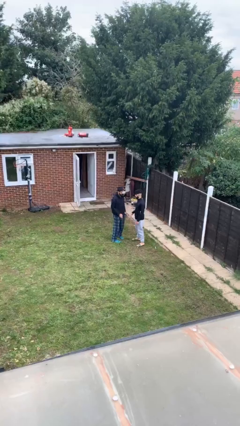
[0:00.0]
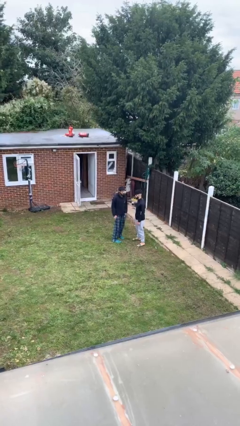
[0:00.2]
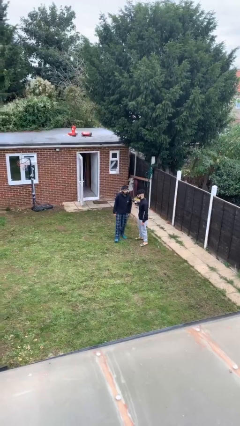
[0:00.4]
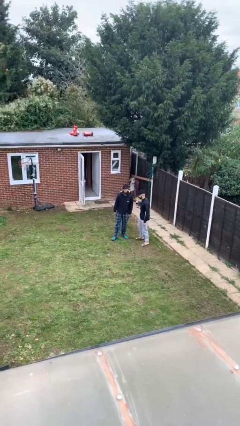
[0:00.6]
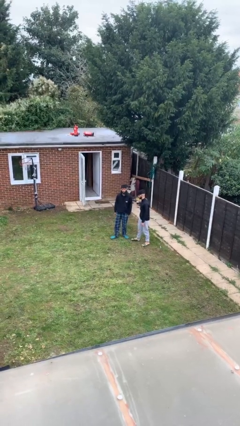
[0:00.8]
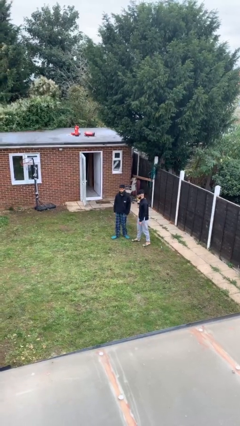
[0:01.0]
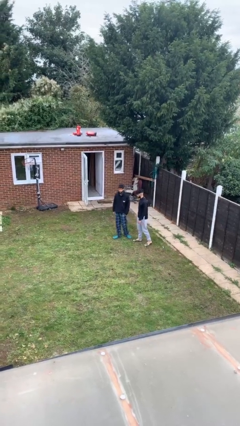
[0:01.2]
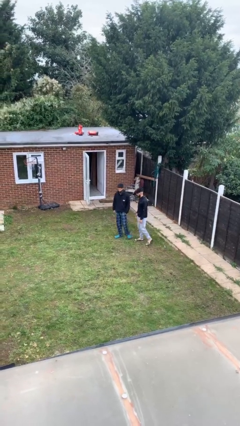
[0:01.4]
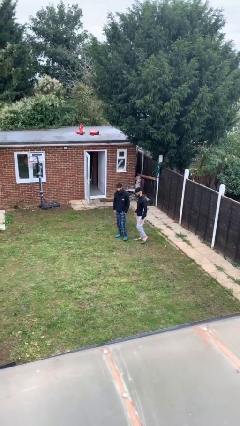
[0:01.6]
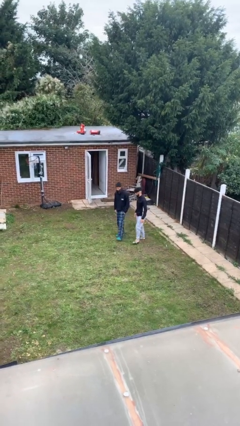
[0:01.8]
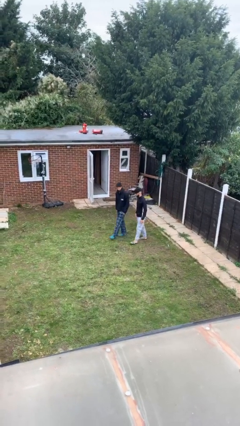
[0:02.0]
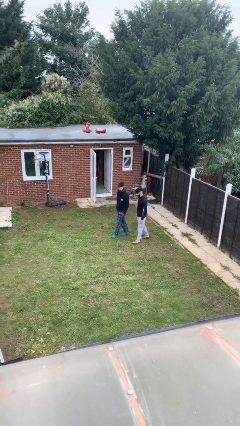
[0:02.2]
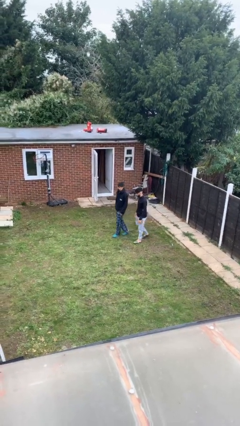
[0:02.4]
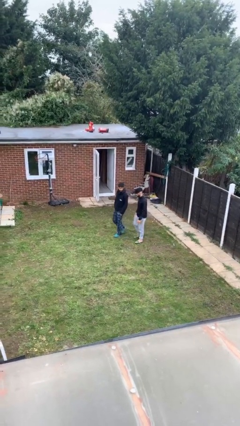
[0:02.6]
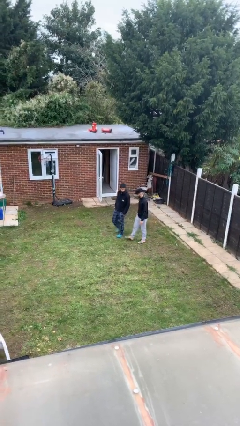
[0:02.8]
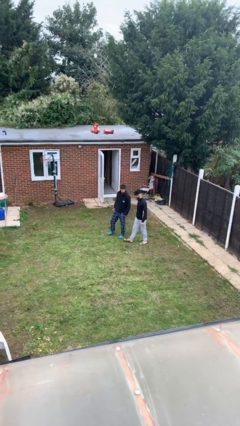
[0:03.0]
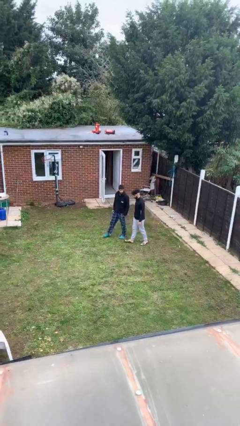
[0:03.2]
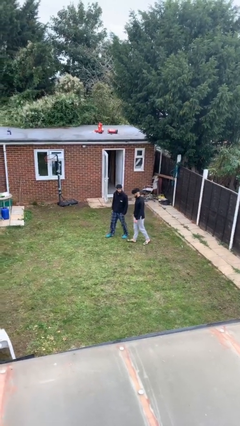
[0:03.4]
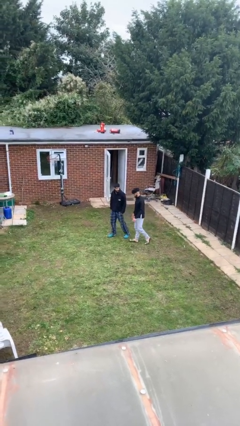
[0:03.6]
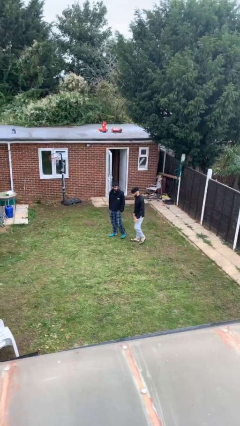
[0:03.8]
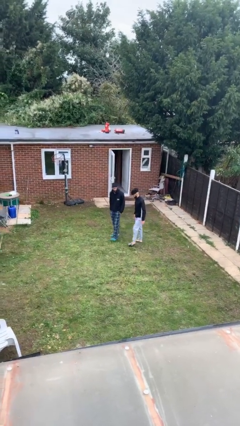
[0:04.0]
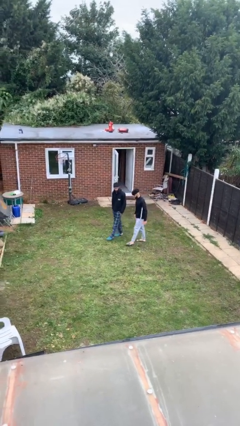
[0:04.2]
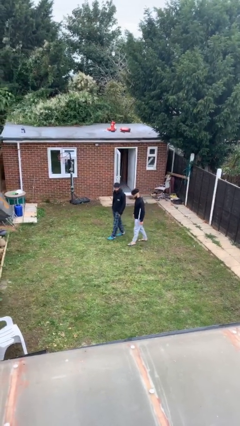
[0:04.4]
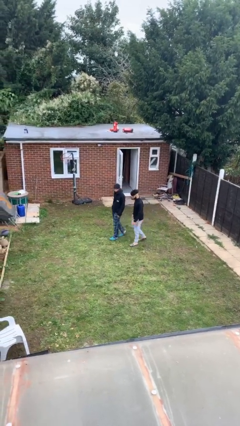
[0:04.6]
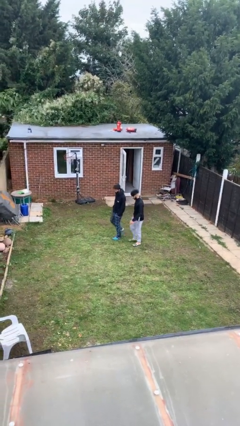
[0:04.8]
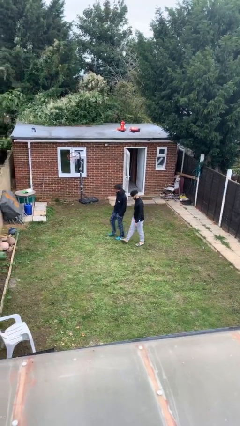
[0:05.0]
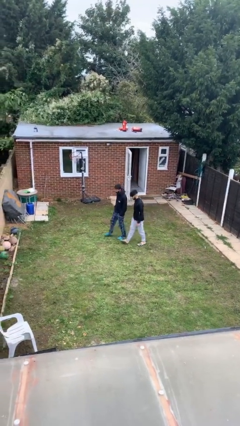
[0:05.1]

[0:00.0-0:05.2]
person talks to person

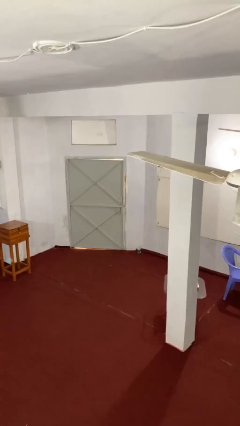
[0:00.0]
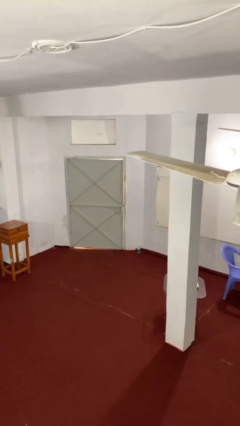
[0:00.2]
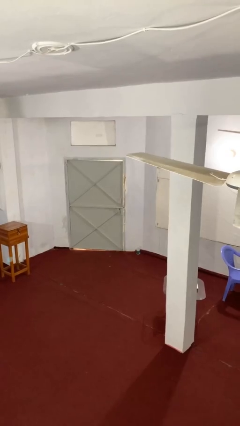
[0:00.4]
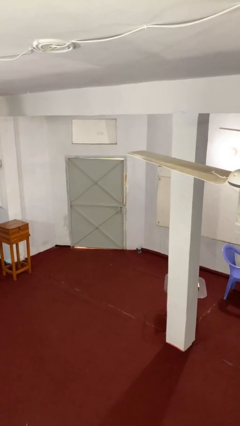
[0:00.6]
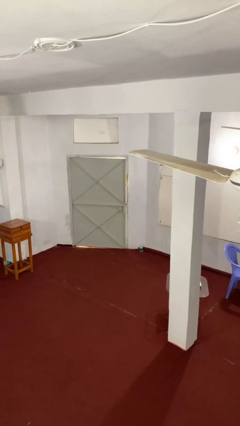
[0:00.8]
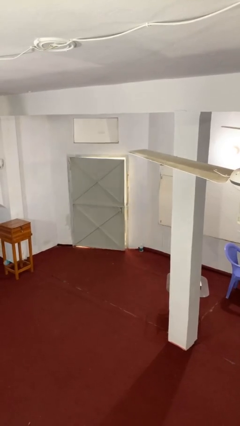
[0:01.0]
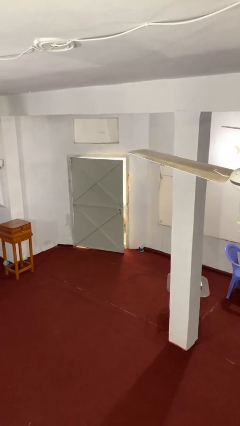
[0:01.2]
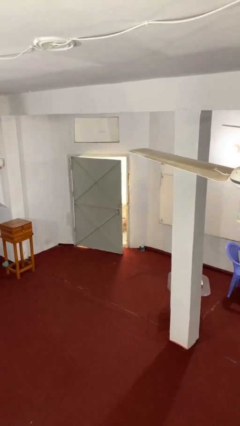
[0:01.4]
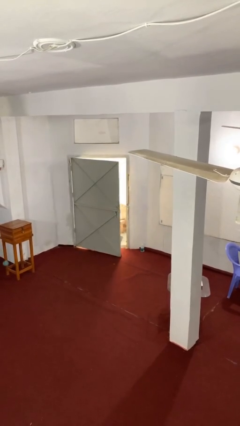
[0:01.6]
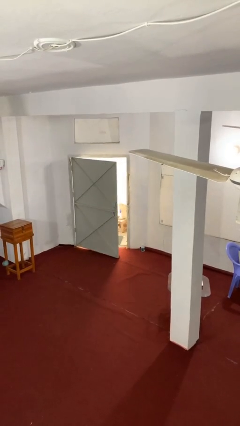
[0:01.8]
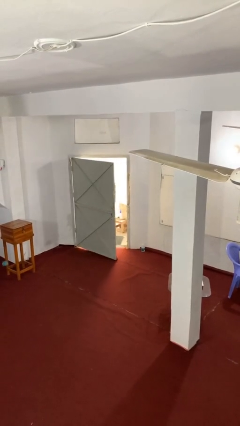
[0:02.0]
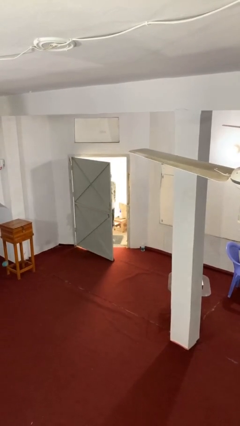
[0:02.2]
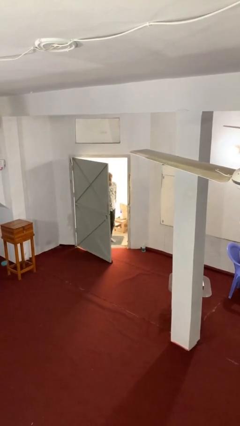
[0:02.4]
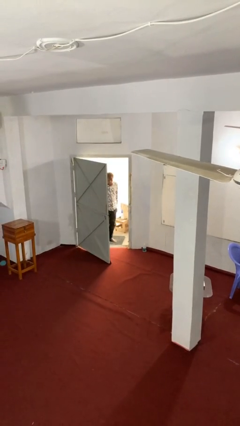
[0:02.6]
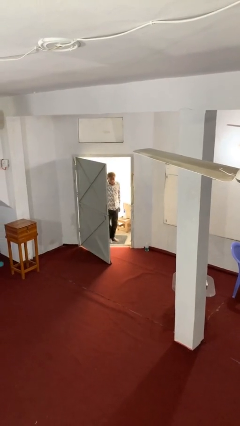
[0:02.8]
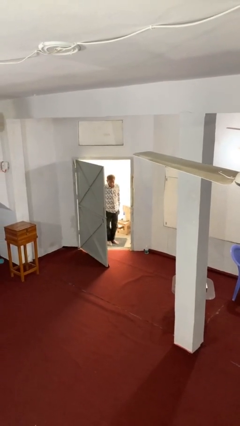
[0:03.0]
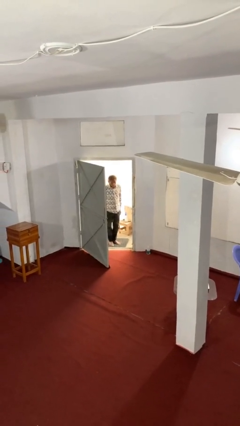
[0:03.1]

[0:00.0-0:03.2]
person opens facility door

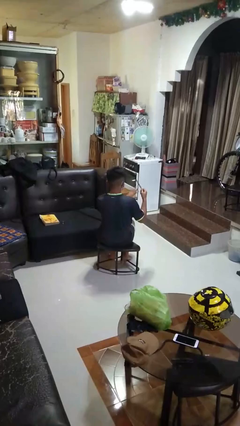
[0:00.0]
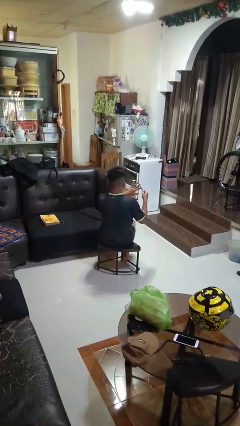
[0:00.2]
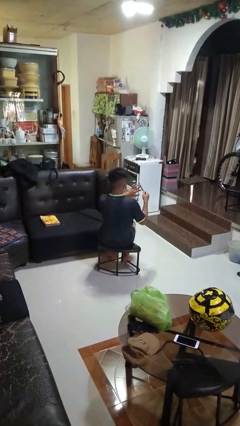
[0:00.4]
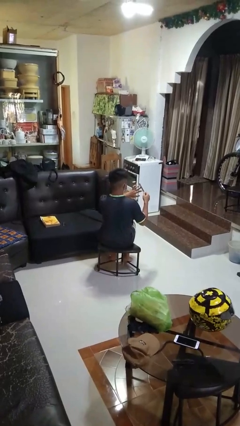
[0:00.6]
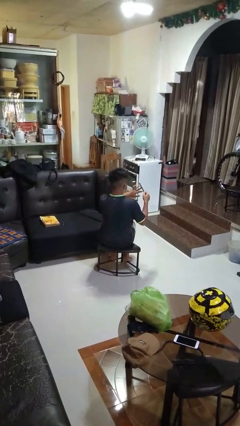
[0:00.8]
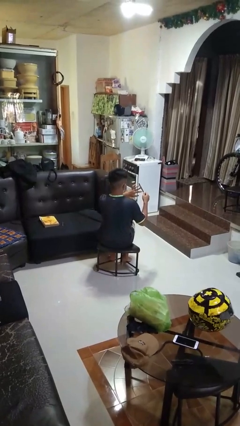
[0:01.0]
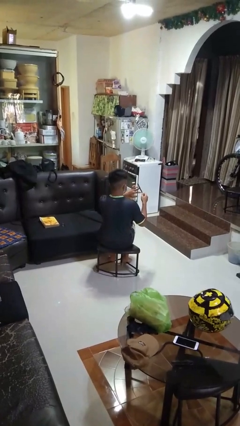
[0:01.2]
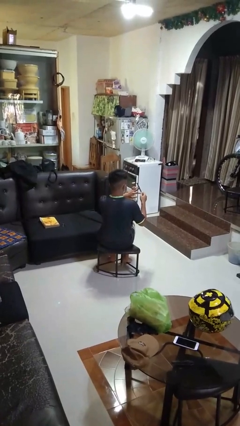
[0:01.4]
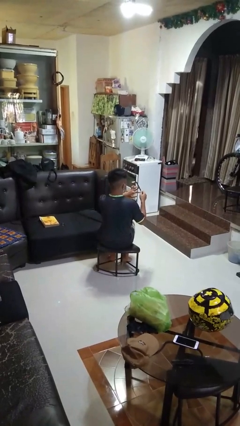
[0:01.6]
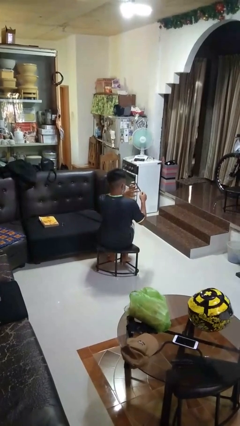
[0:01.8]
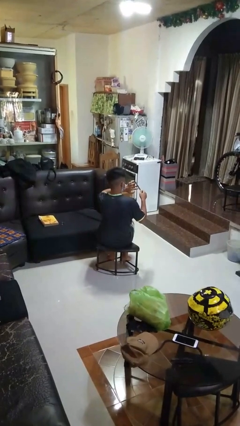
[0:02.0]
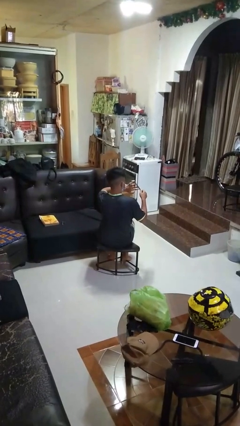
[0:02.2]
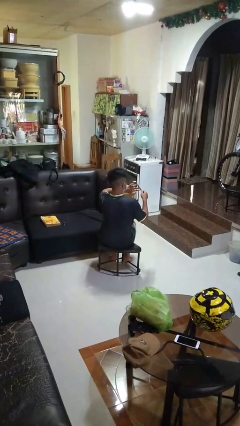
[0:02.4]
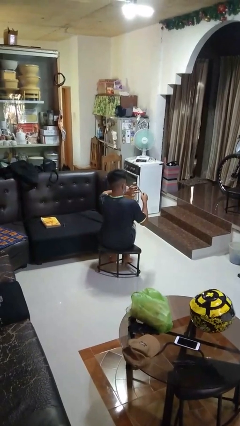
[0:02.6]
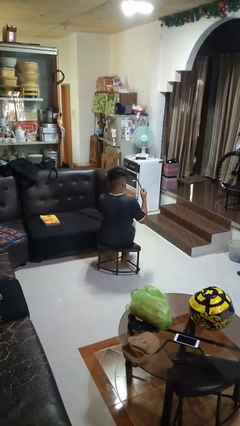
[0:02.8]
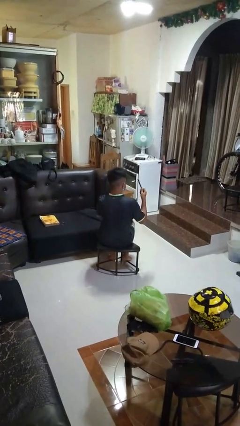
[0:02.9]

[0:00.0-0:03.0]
person files fingernails

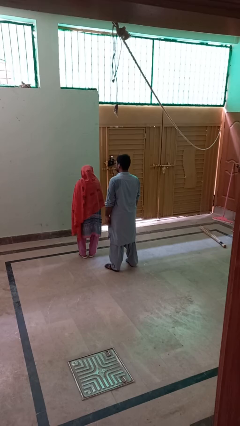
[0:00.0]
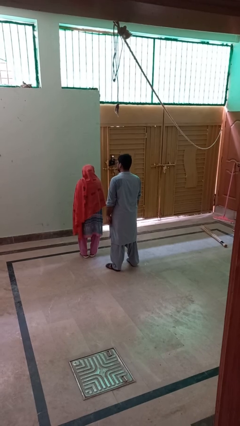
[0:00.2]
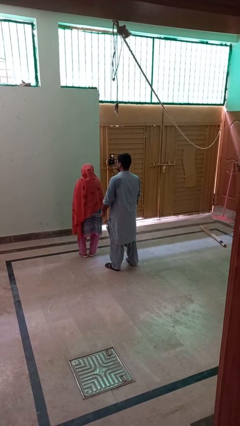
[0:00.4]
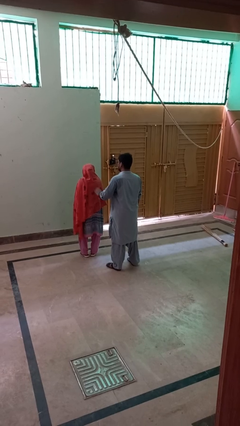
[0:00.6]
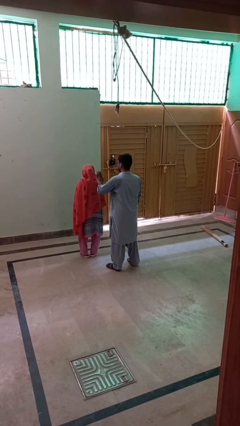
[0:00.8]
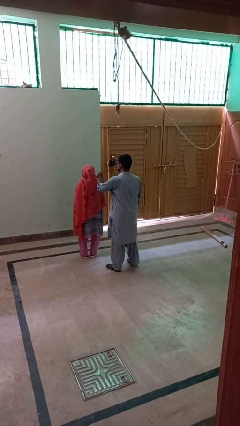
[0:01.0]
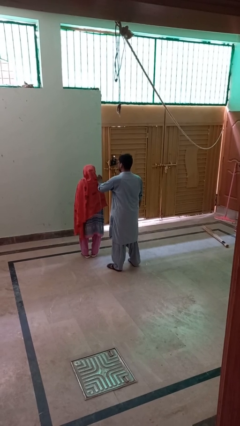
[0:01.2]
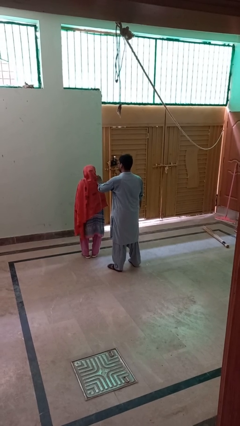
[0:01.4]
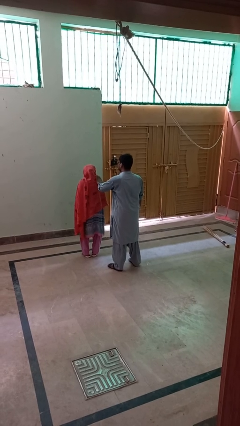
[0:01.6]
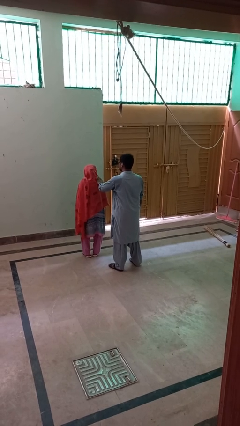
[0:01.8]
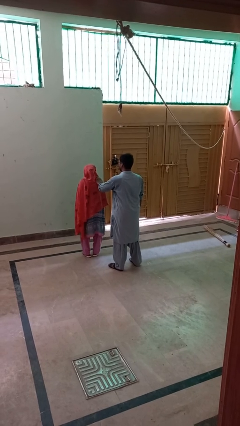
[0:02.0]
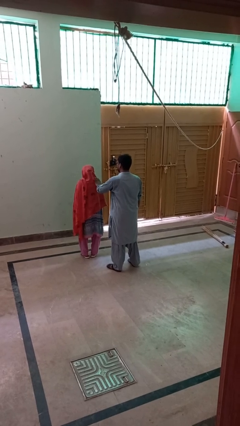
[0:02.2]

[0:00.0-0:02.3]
person touches back of person

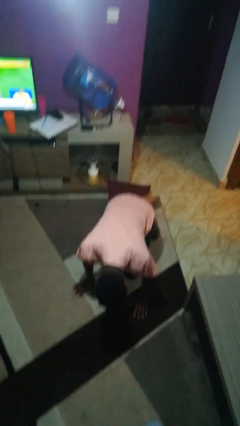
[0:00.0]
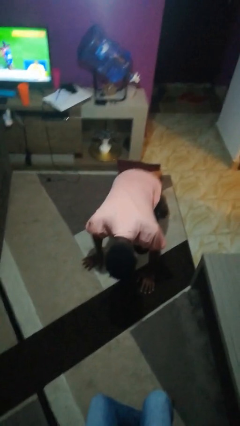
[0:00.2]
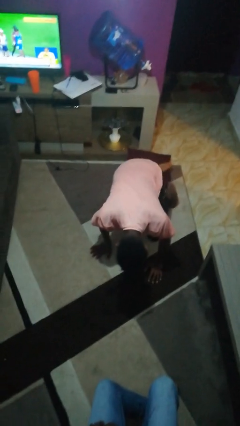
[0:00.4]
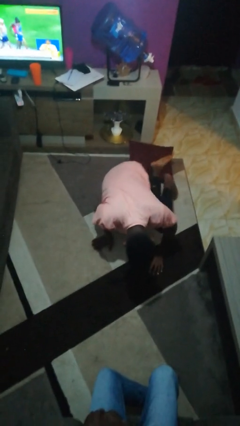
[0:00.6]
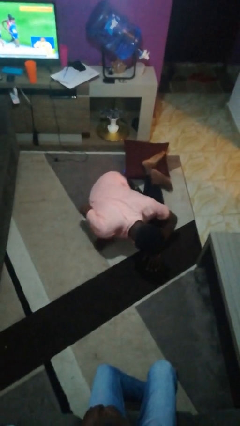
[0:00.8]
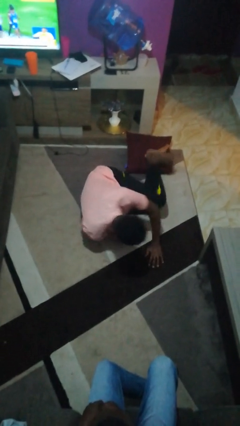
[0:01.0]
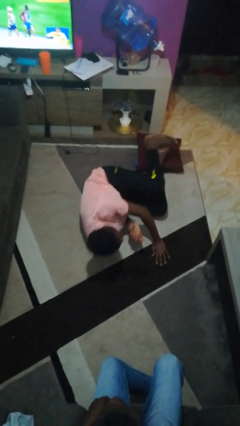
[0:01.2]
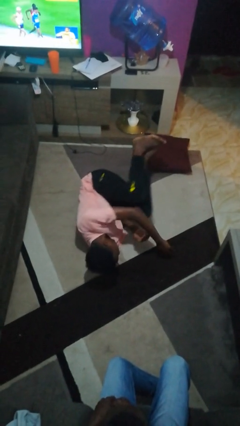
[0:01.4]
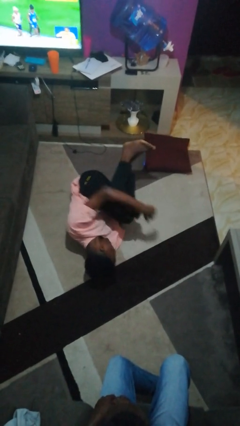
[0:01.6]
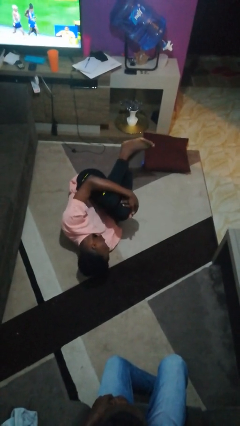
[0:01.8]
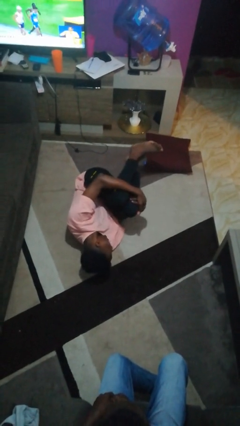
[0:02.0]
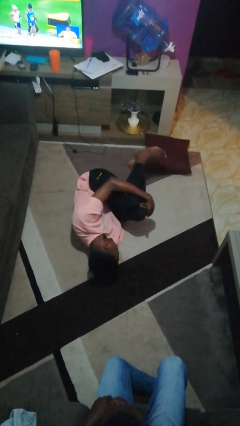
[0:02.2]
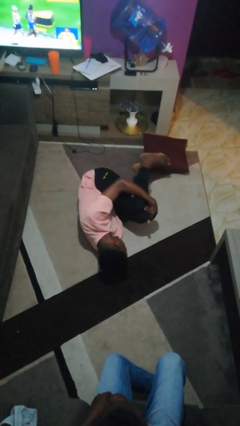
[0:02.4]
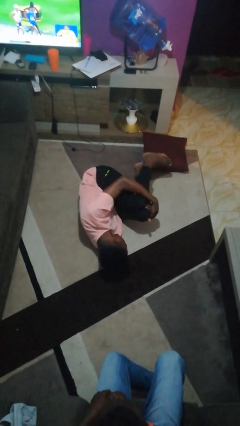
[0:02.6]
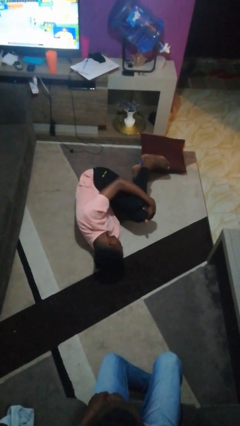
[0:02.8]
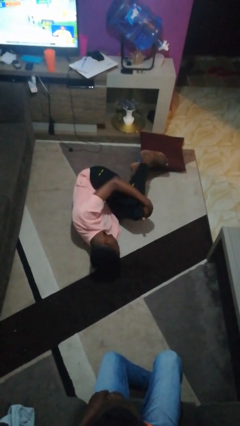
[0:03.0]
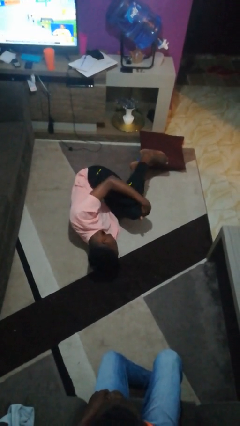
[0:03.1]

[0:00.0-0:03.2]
person lies down on floor

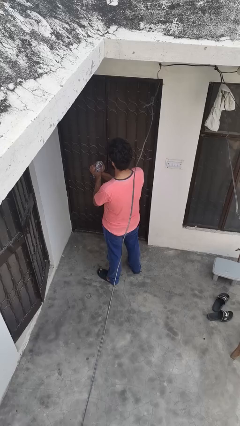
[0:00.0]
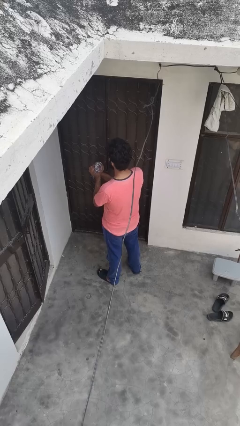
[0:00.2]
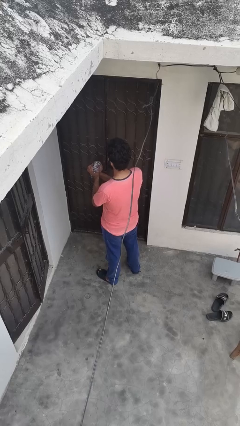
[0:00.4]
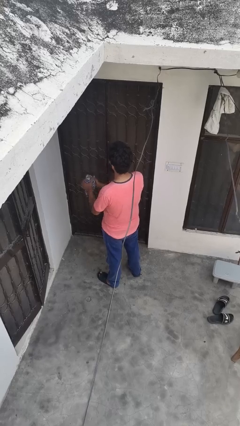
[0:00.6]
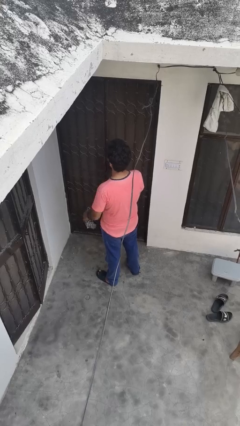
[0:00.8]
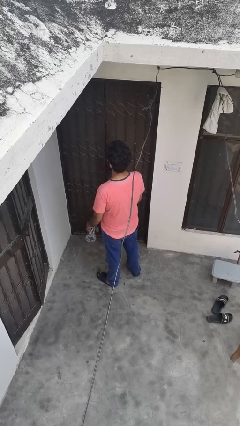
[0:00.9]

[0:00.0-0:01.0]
person squeezes object
